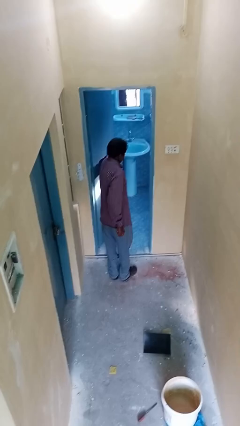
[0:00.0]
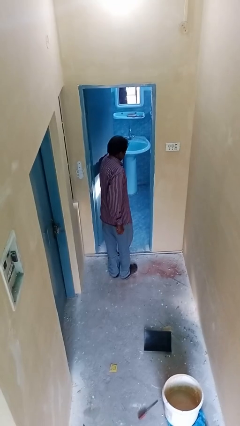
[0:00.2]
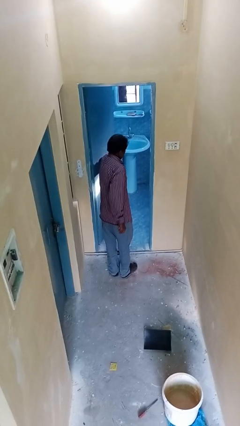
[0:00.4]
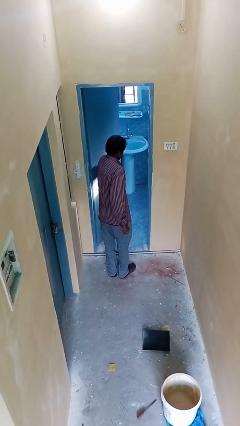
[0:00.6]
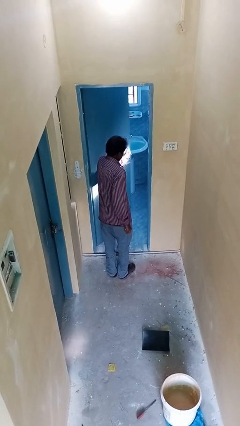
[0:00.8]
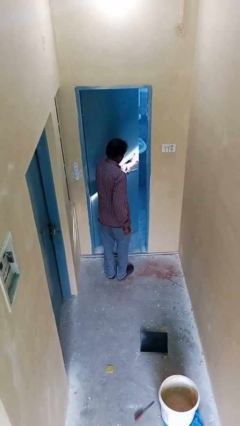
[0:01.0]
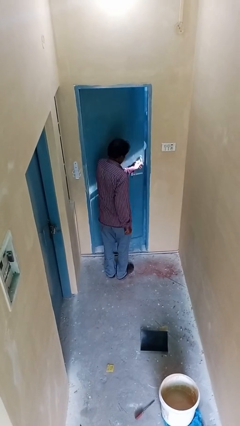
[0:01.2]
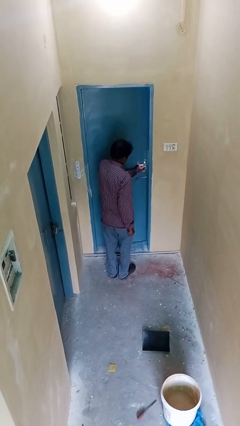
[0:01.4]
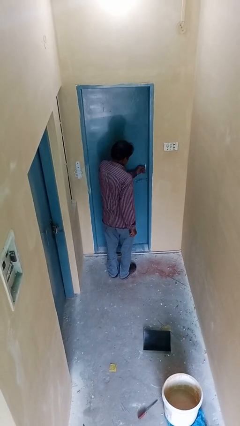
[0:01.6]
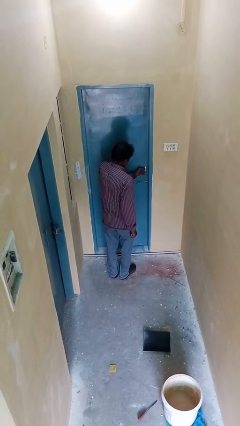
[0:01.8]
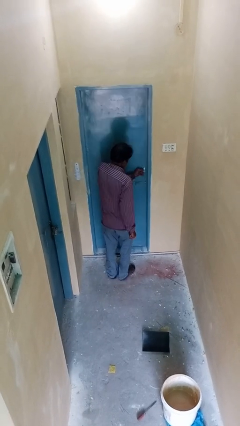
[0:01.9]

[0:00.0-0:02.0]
person closes facility door

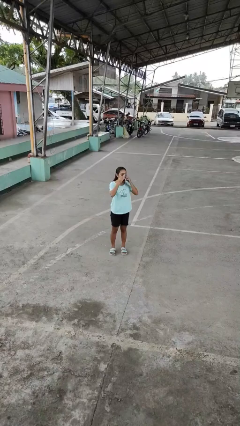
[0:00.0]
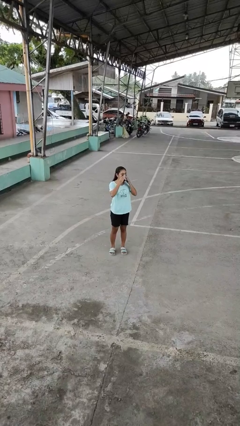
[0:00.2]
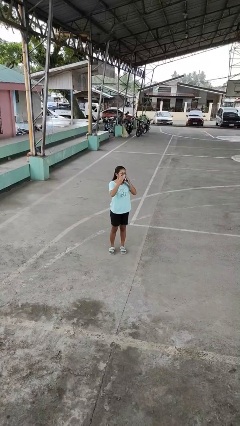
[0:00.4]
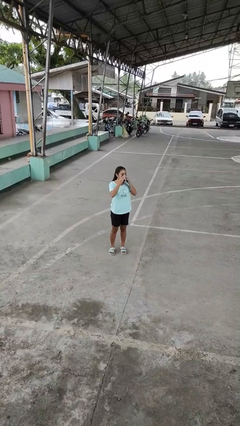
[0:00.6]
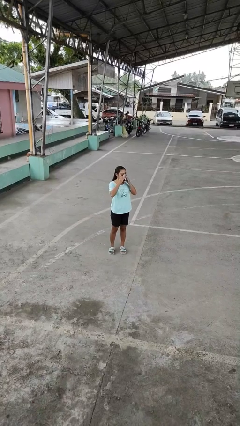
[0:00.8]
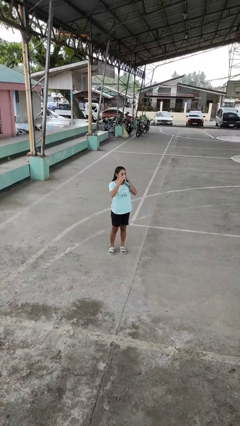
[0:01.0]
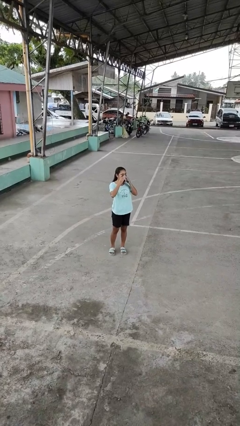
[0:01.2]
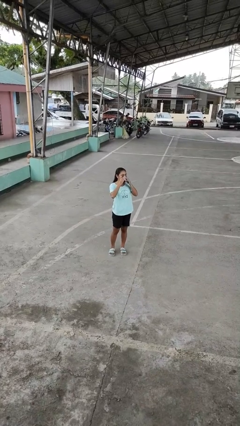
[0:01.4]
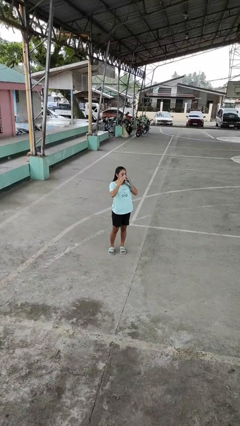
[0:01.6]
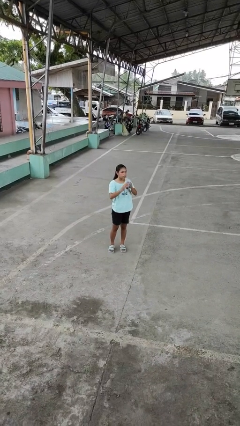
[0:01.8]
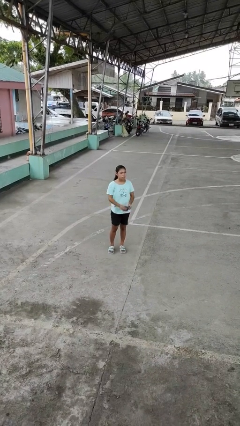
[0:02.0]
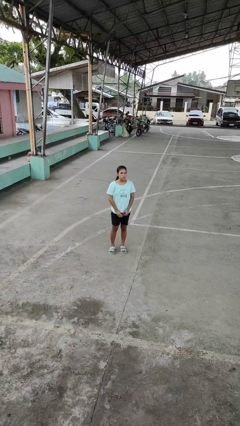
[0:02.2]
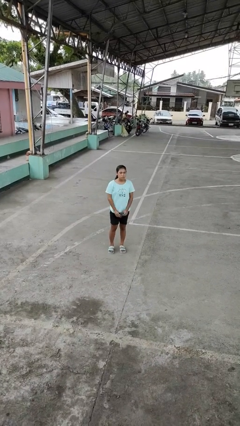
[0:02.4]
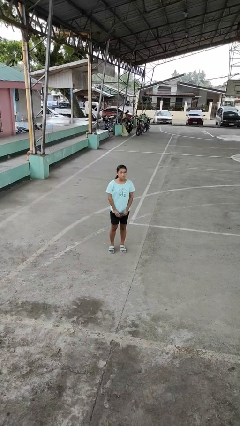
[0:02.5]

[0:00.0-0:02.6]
person blows nose

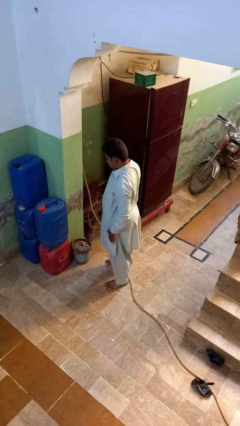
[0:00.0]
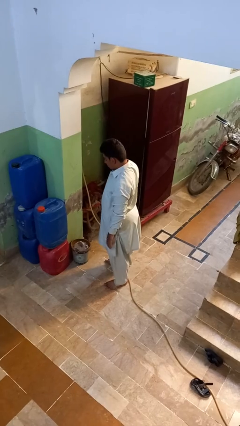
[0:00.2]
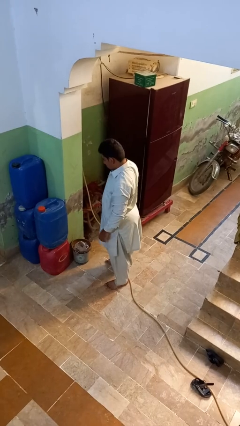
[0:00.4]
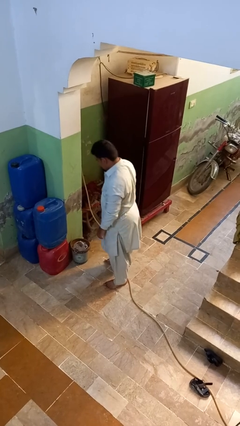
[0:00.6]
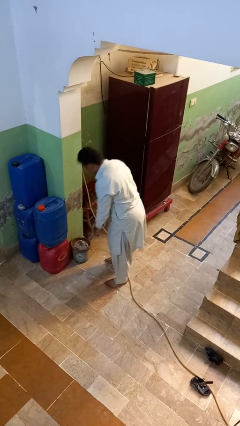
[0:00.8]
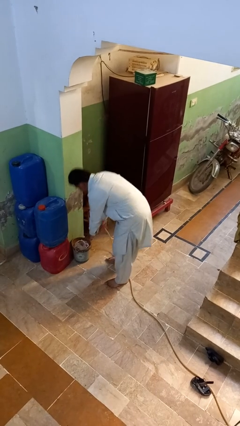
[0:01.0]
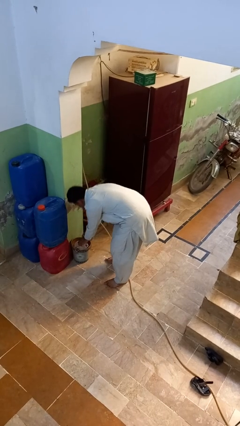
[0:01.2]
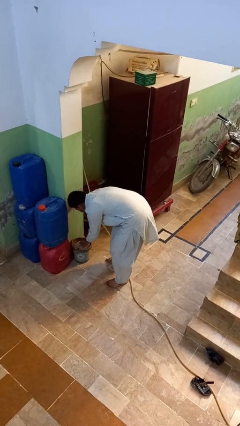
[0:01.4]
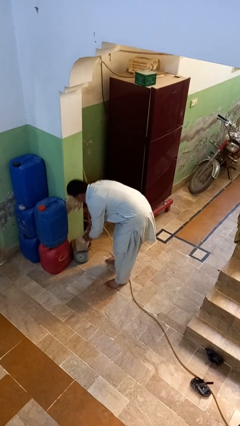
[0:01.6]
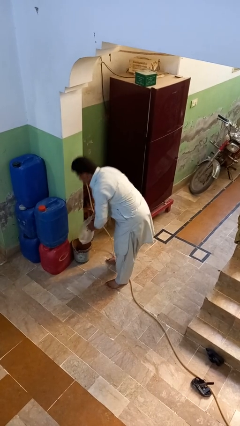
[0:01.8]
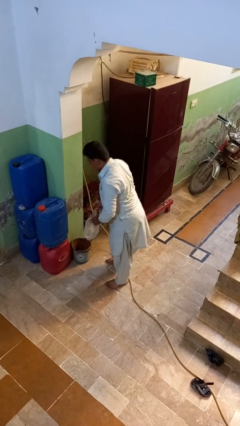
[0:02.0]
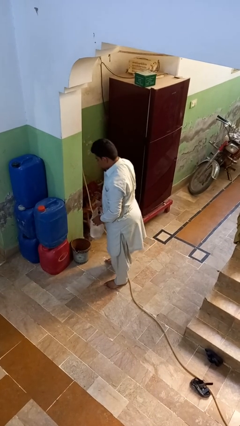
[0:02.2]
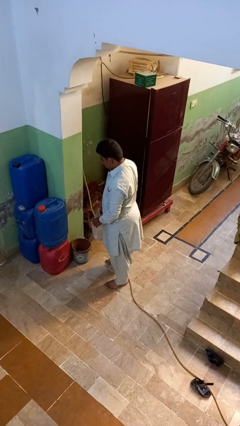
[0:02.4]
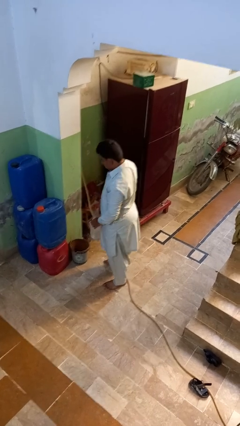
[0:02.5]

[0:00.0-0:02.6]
person removes trashbag from trashcan

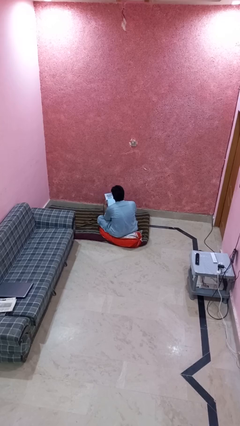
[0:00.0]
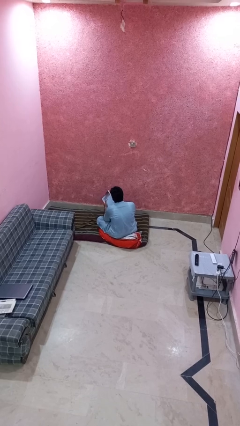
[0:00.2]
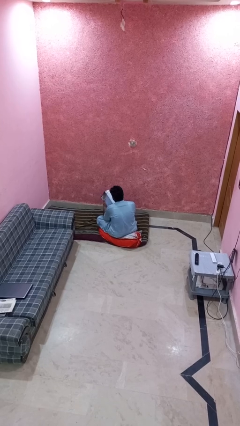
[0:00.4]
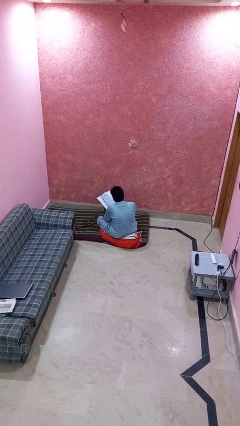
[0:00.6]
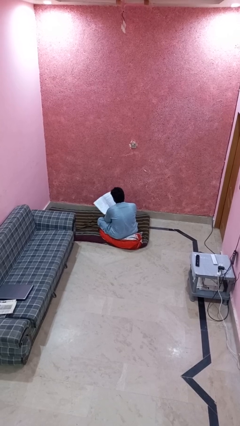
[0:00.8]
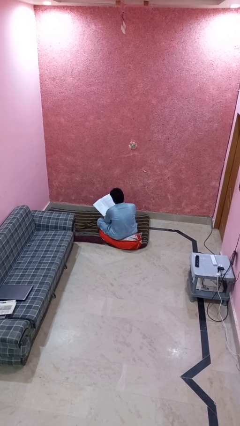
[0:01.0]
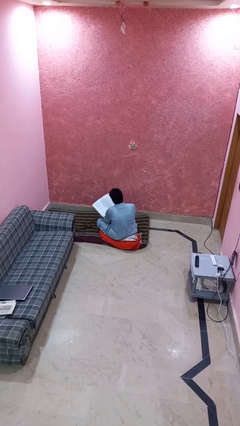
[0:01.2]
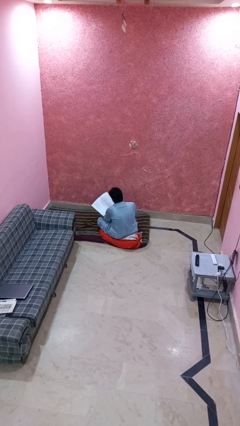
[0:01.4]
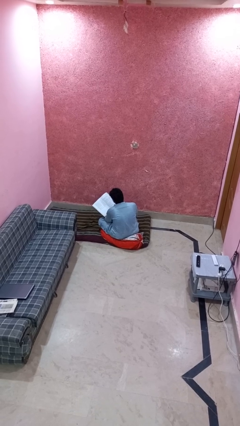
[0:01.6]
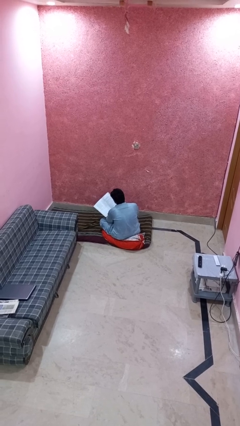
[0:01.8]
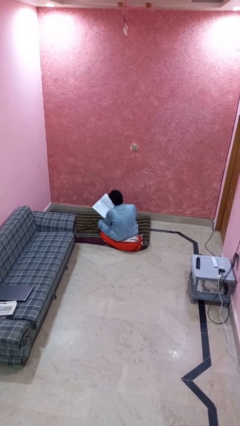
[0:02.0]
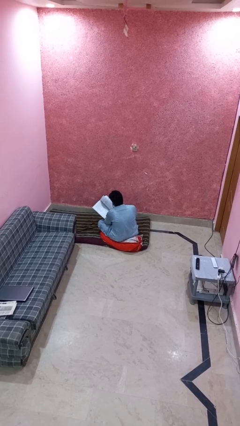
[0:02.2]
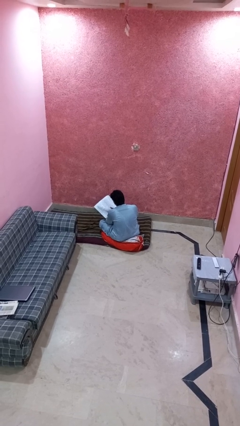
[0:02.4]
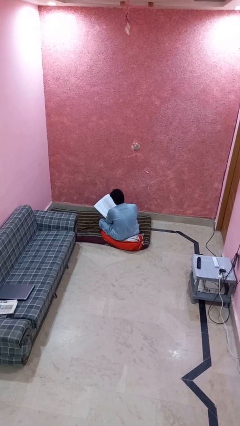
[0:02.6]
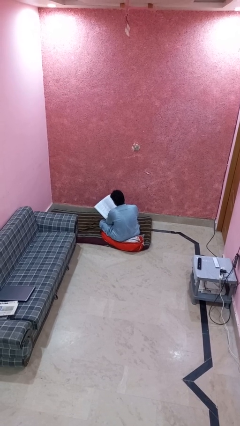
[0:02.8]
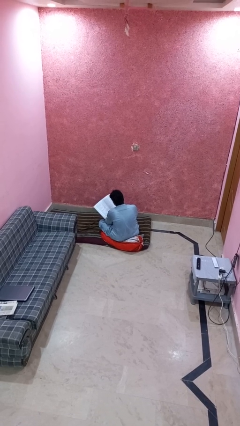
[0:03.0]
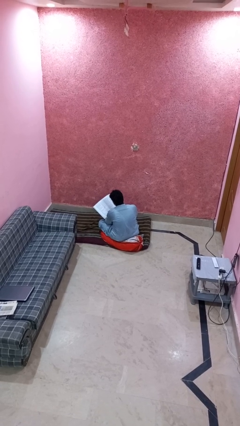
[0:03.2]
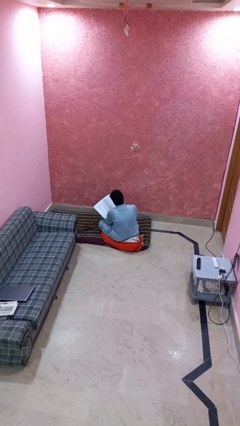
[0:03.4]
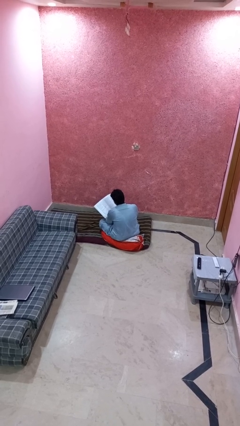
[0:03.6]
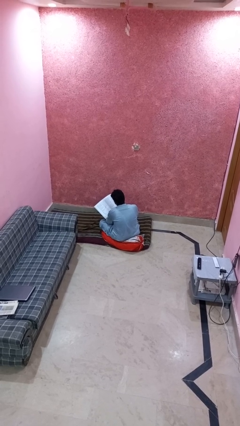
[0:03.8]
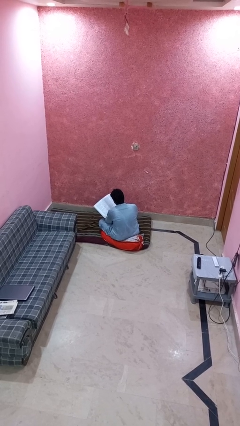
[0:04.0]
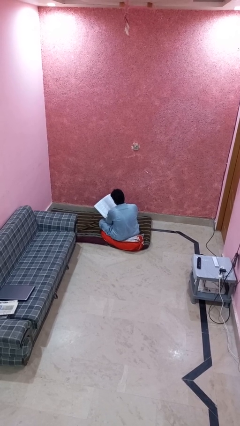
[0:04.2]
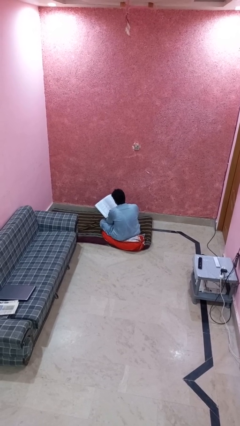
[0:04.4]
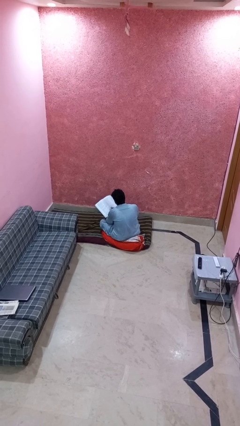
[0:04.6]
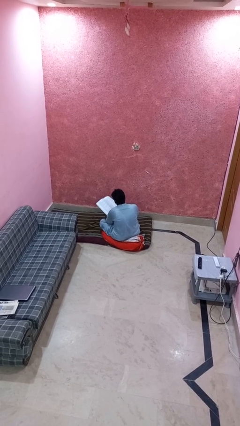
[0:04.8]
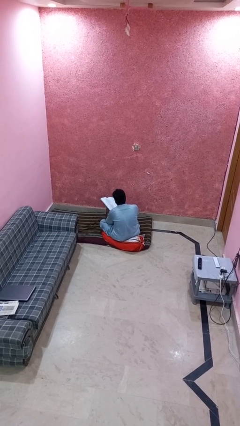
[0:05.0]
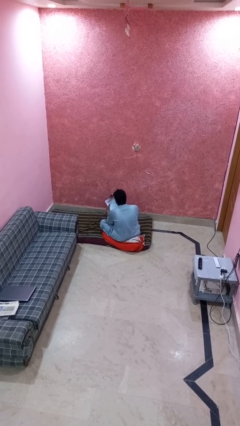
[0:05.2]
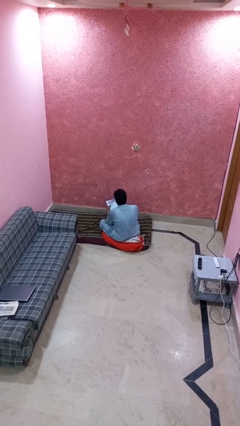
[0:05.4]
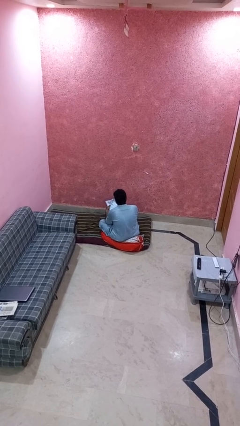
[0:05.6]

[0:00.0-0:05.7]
person reads magazine

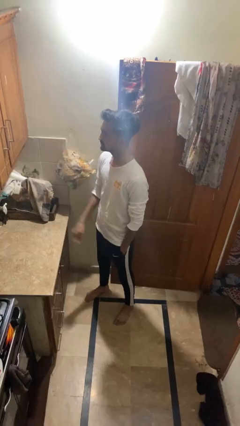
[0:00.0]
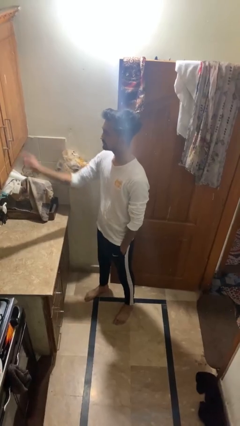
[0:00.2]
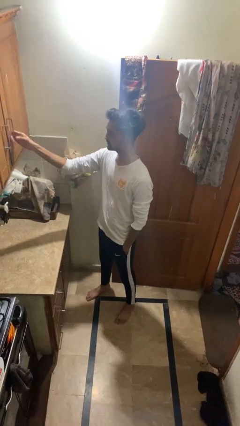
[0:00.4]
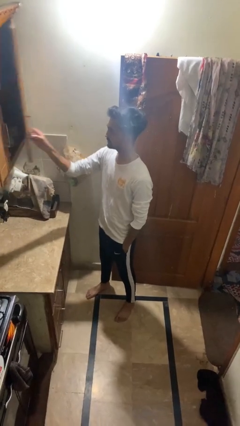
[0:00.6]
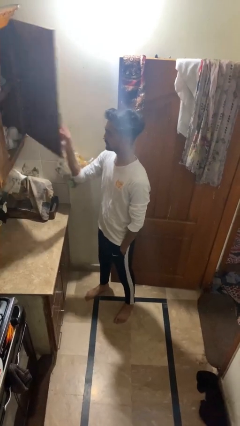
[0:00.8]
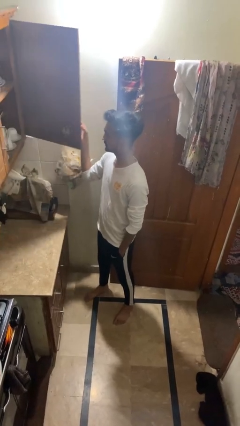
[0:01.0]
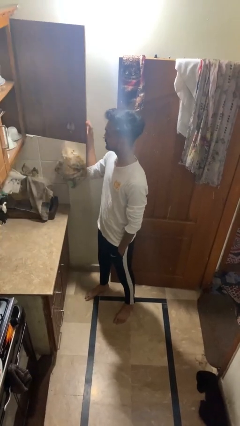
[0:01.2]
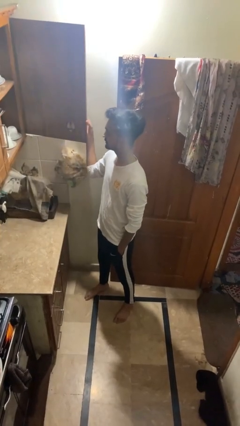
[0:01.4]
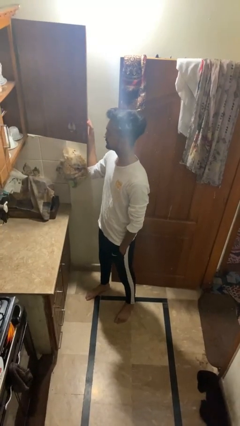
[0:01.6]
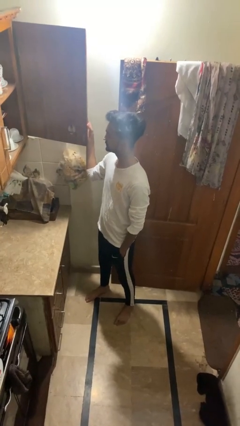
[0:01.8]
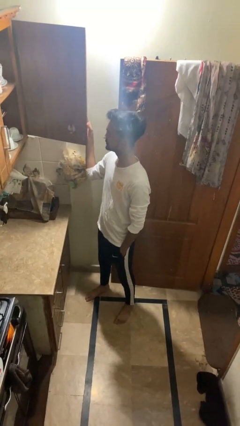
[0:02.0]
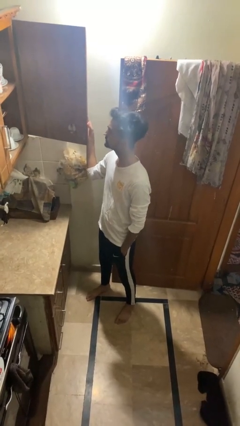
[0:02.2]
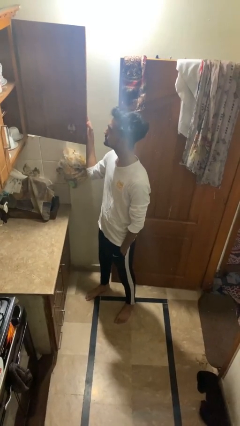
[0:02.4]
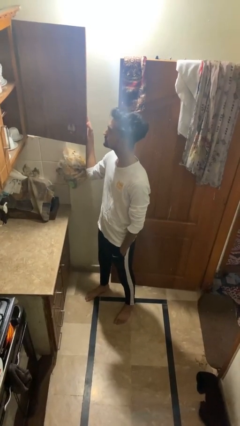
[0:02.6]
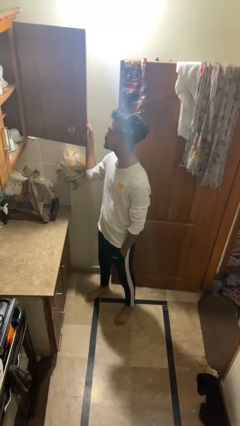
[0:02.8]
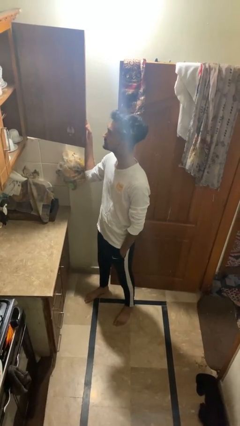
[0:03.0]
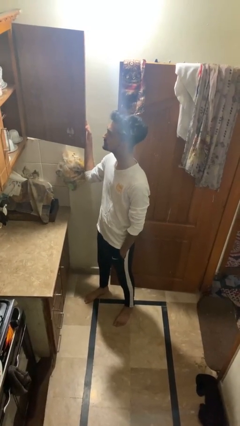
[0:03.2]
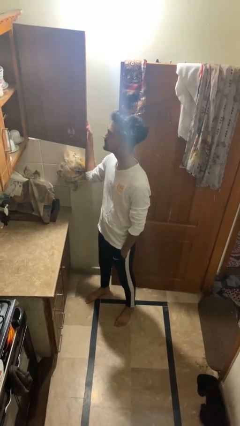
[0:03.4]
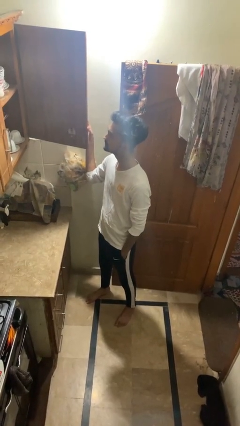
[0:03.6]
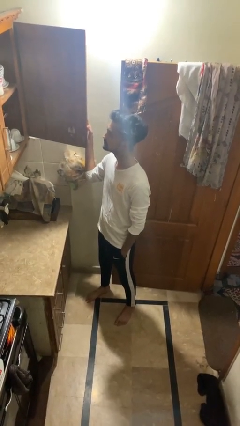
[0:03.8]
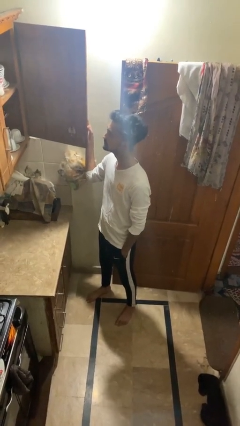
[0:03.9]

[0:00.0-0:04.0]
person opens cabinet

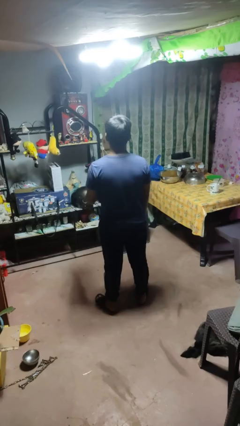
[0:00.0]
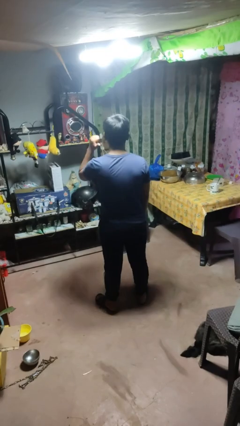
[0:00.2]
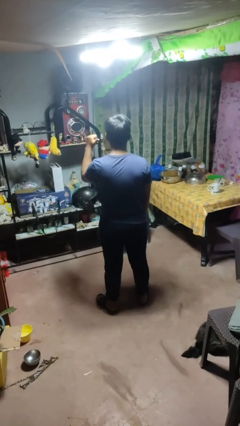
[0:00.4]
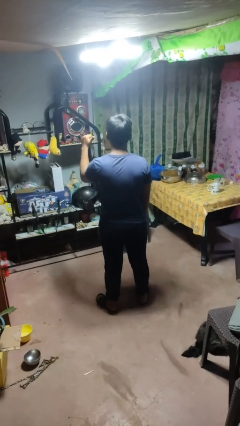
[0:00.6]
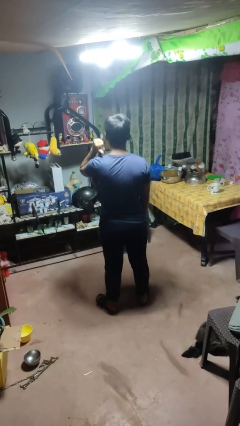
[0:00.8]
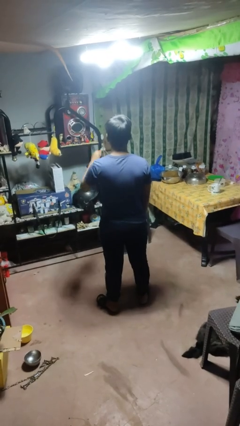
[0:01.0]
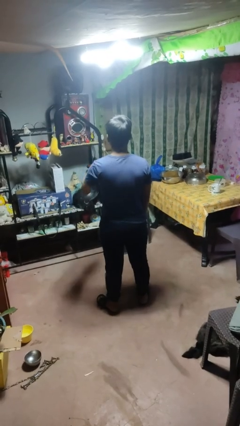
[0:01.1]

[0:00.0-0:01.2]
person gestures behind me
